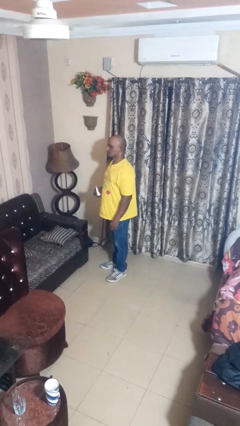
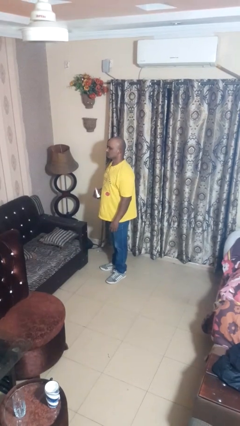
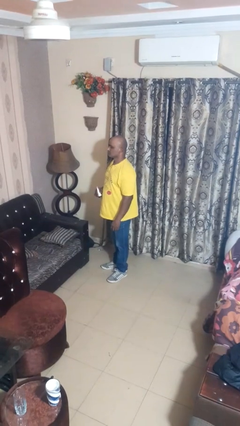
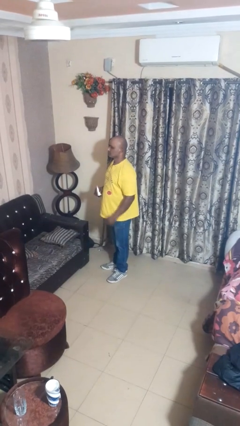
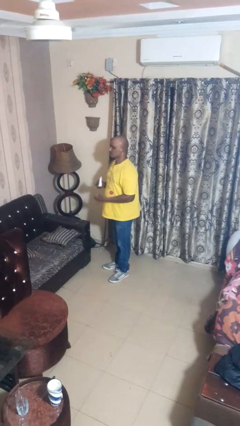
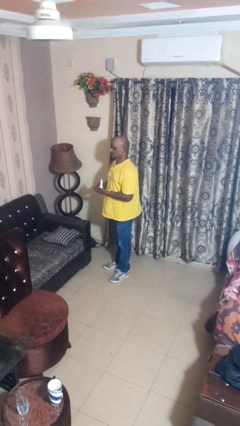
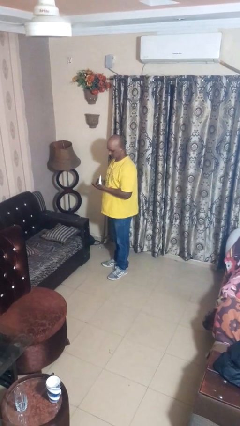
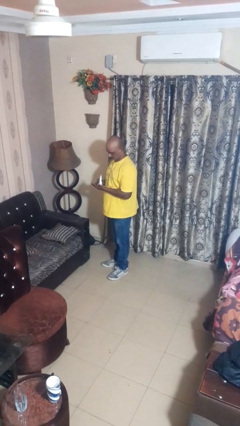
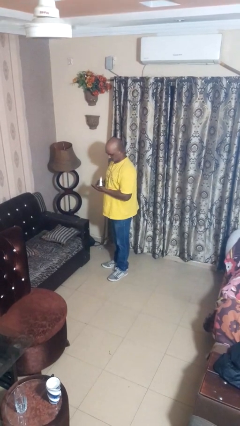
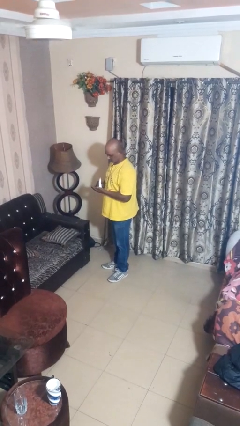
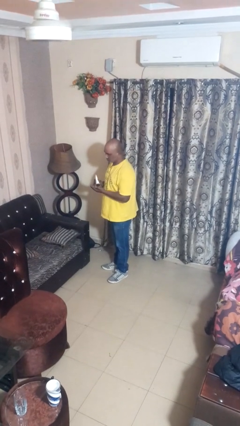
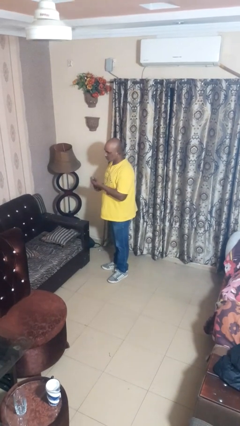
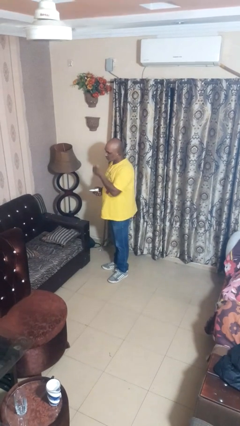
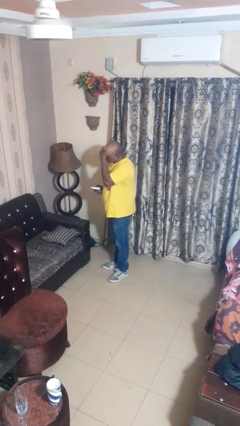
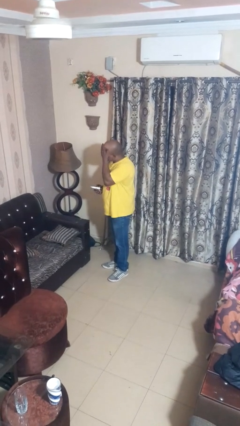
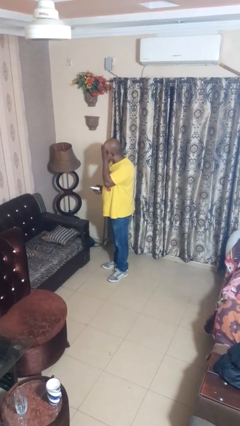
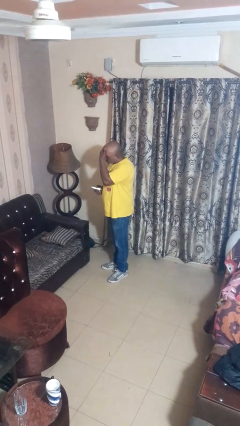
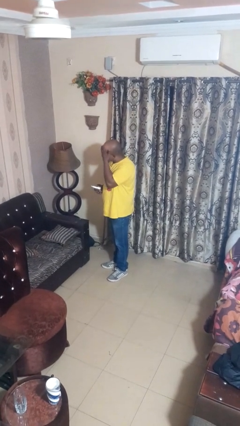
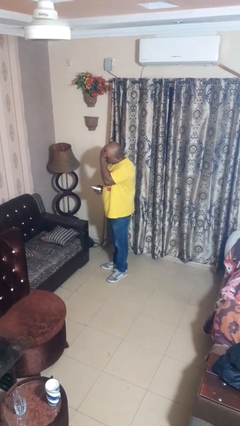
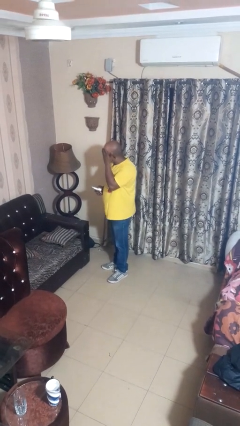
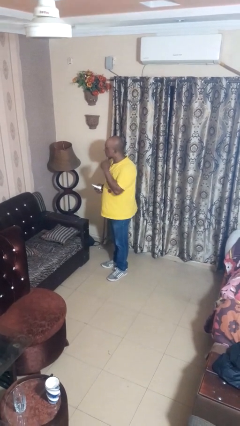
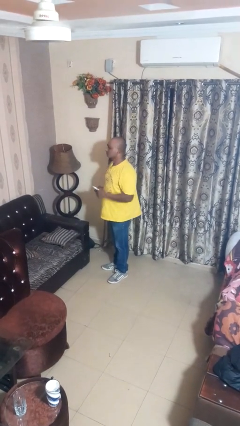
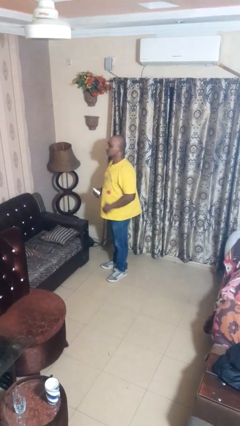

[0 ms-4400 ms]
person applies facial moisturizer

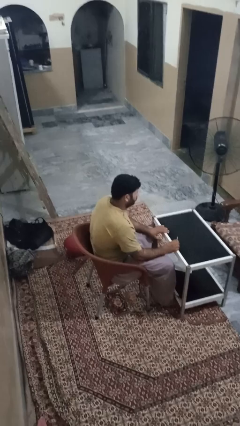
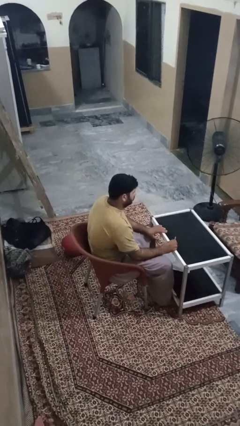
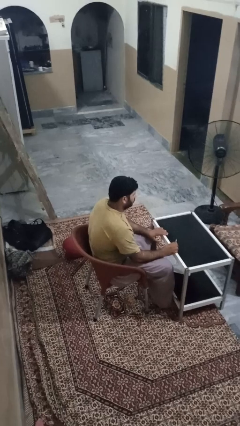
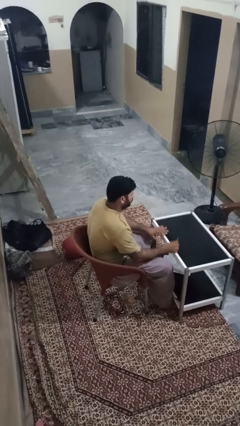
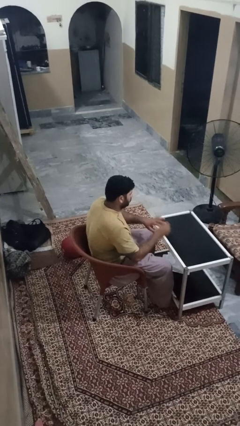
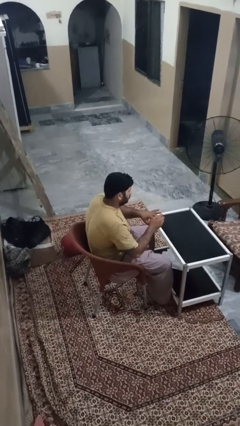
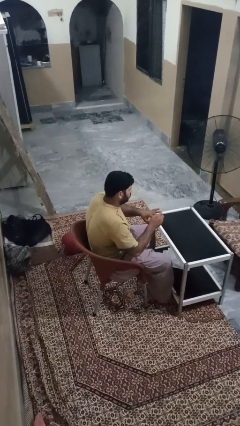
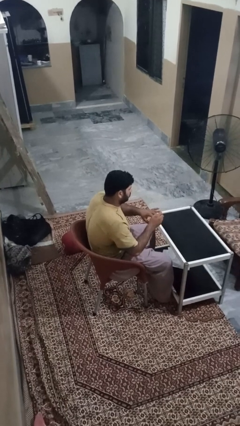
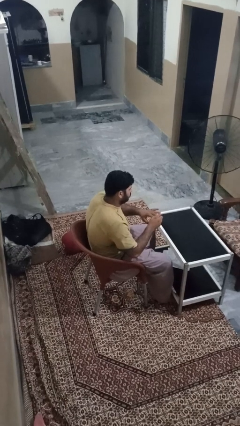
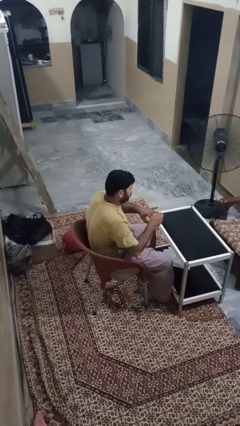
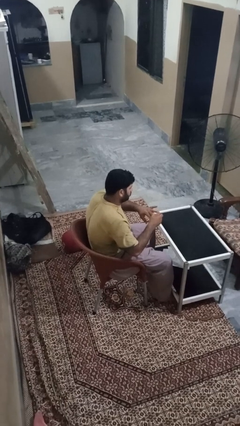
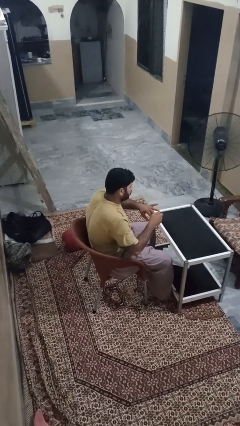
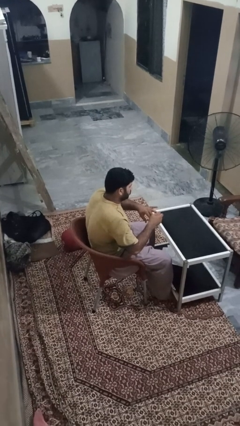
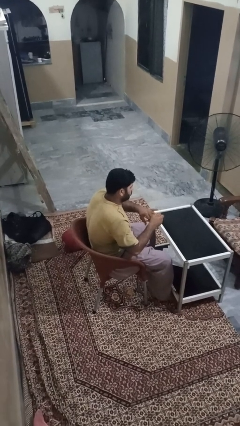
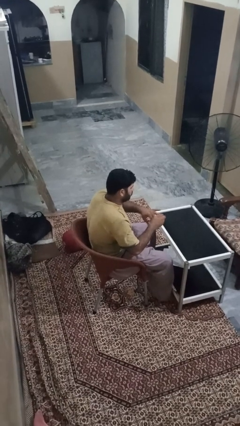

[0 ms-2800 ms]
person files fingernails

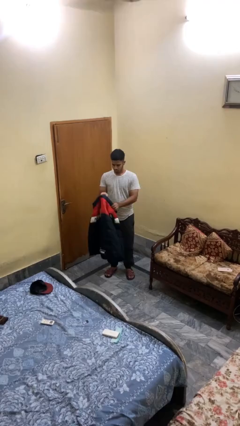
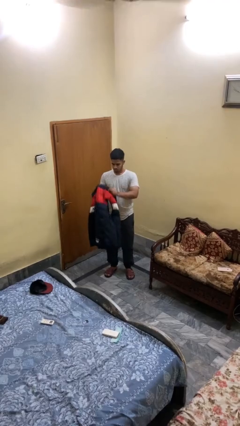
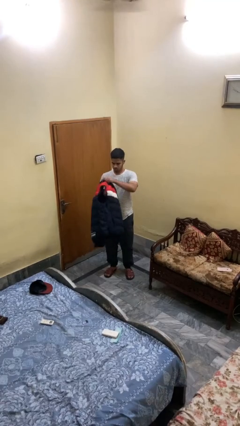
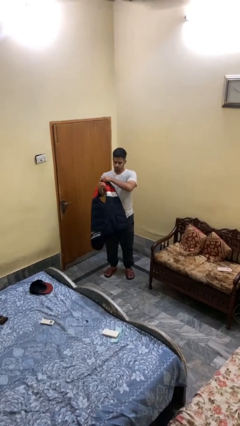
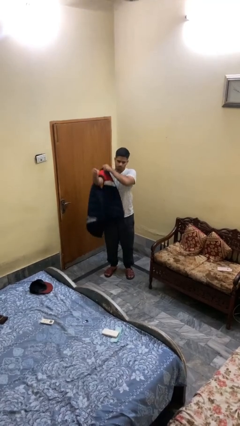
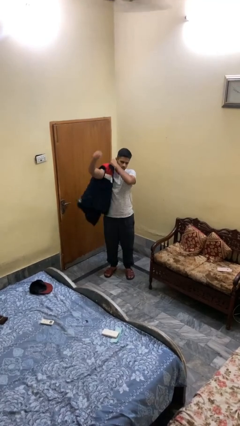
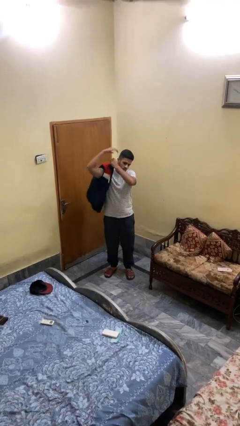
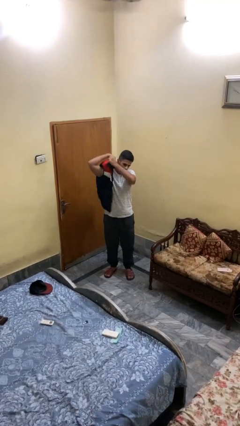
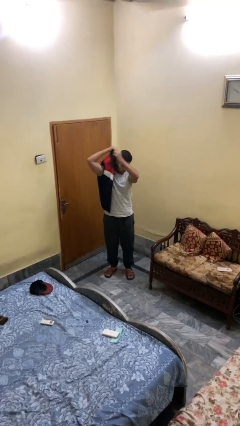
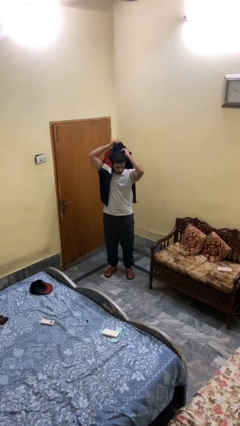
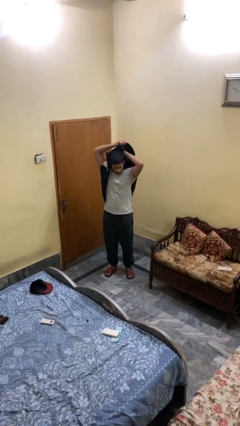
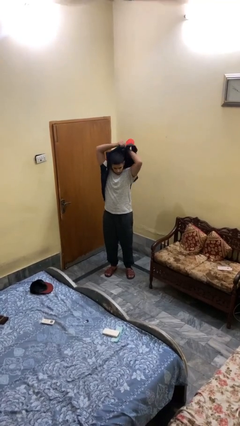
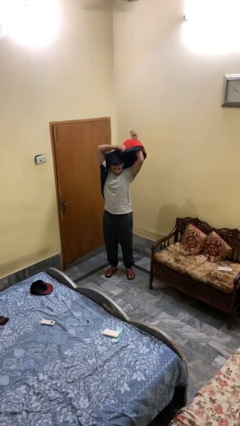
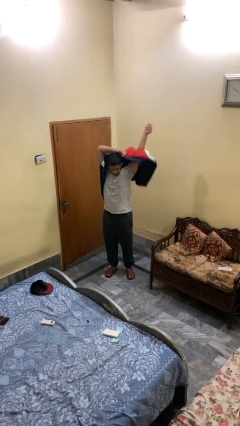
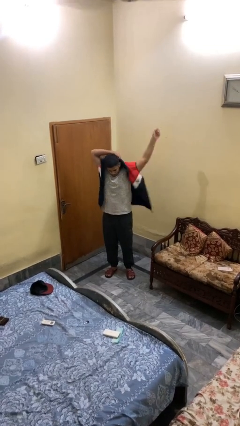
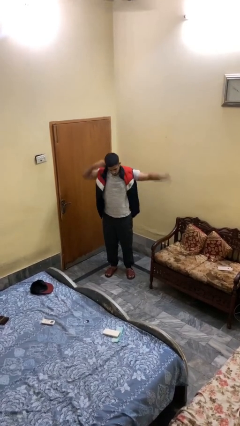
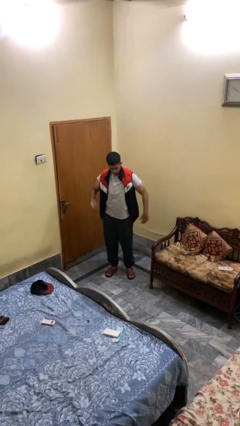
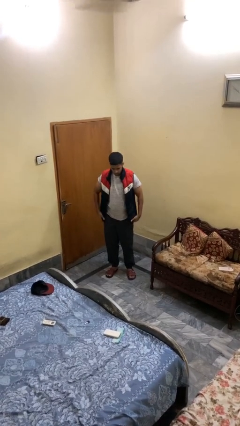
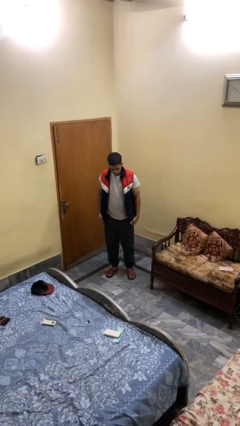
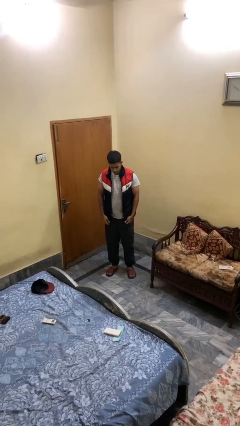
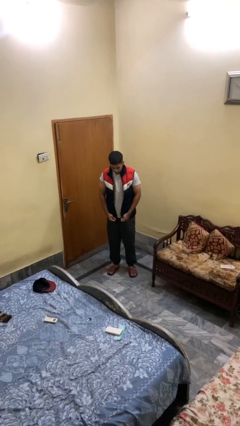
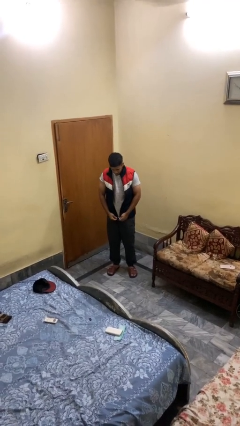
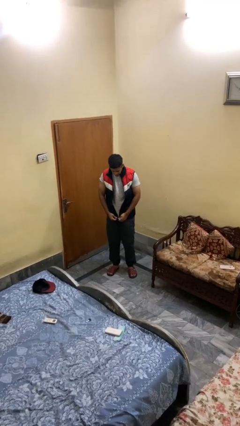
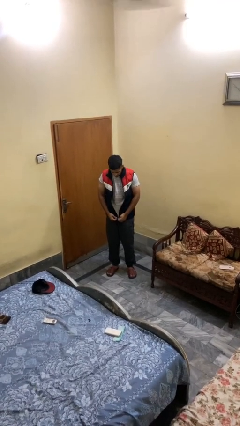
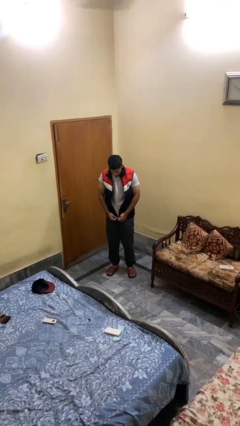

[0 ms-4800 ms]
person puts on jacket

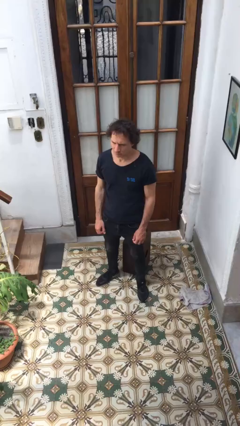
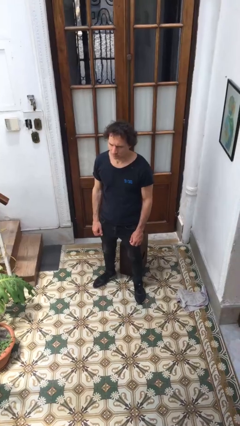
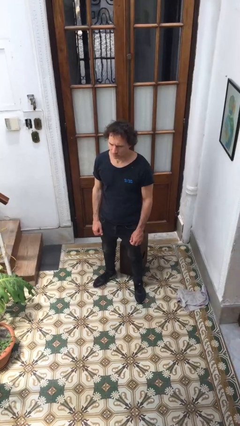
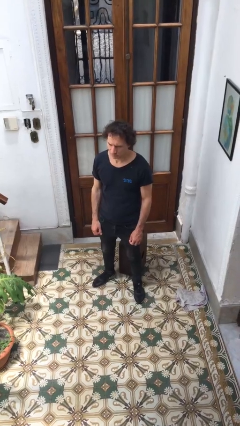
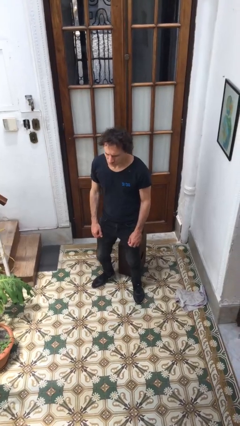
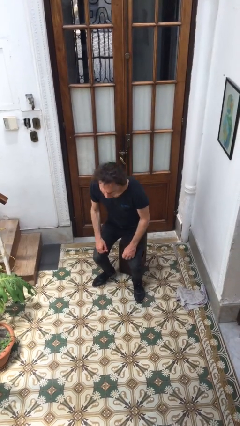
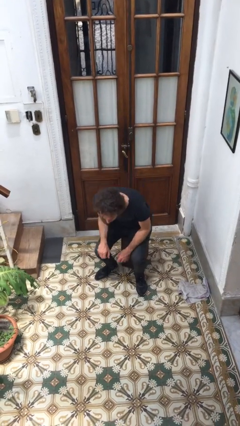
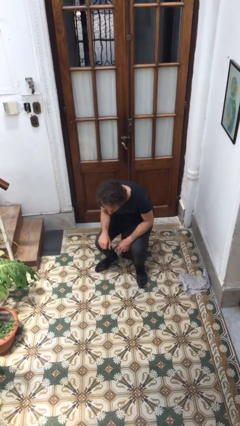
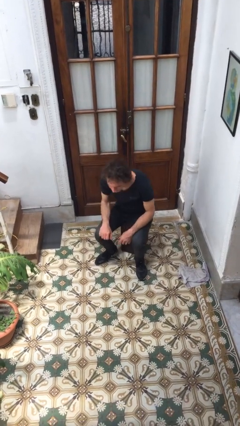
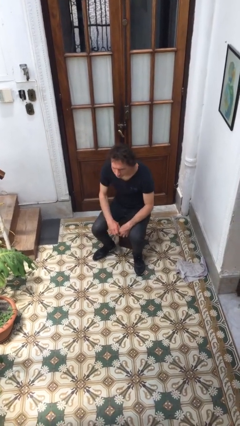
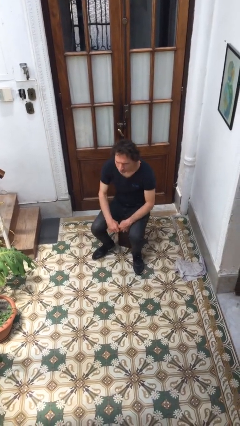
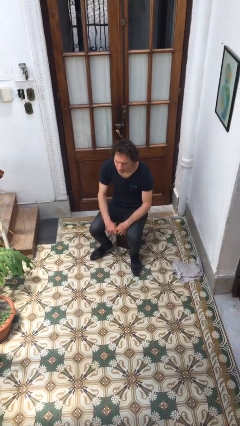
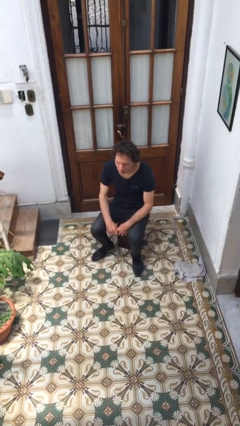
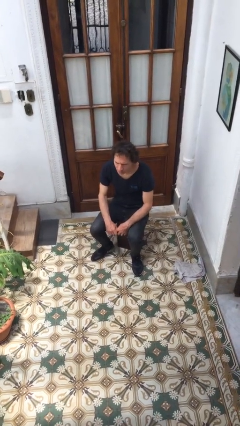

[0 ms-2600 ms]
person sits down

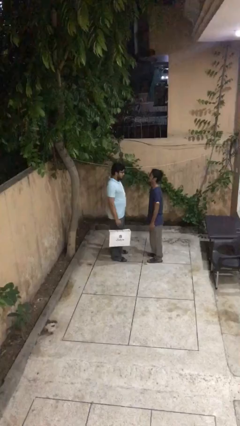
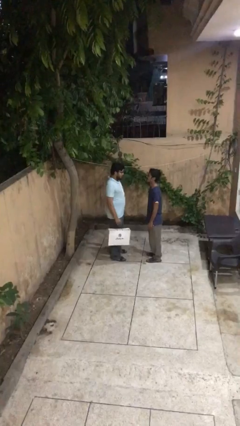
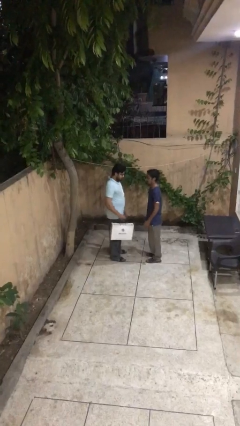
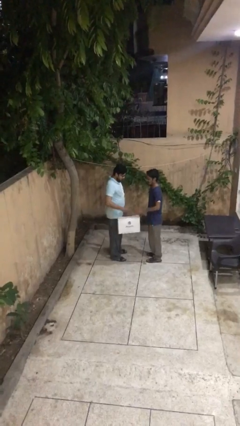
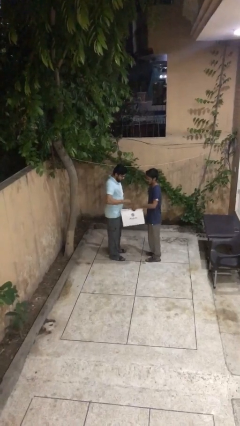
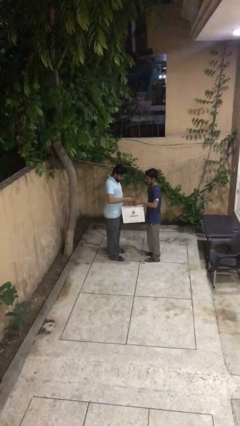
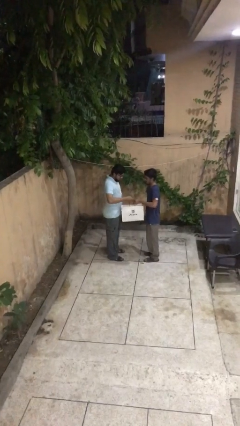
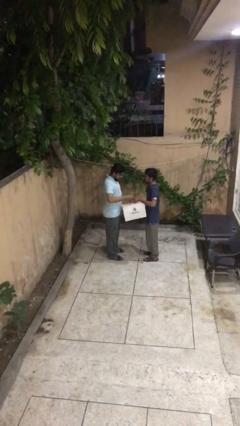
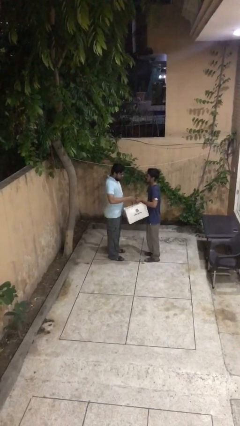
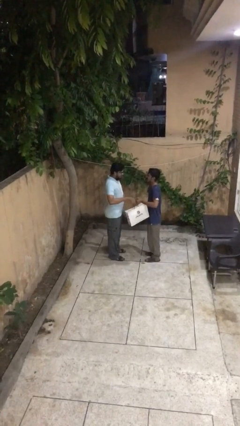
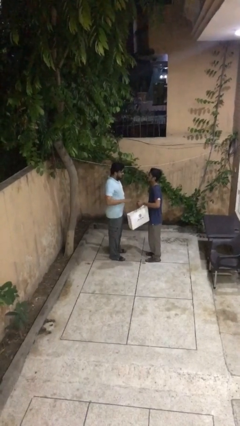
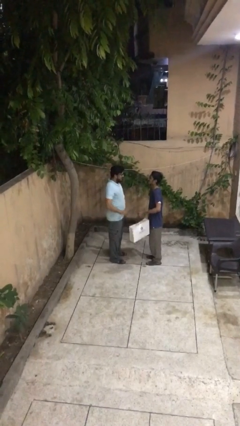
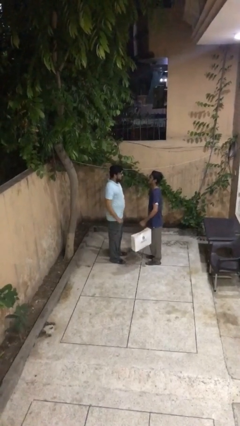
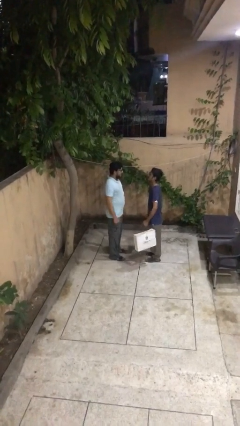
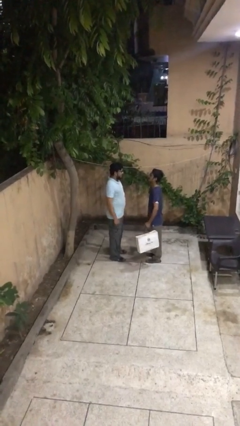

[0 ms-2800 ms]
person transfers object to person

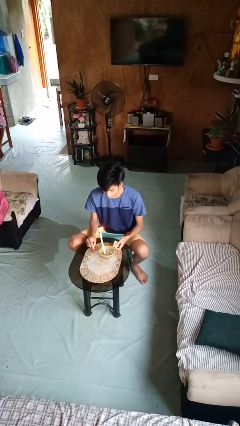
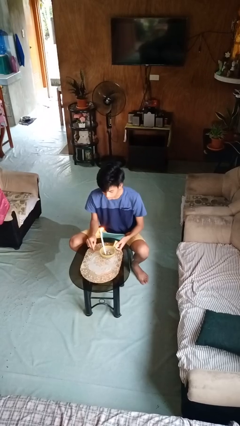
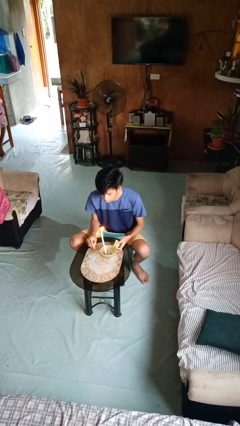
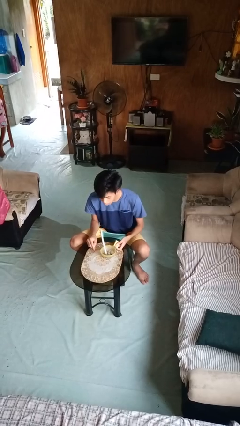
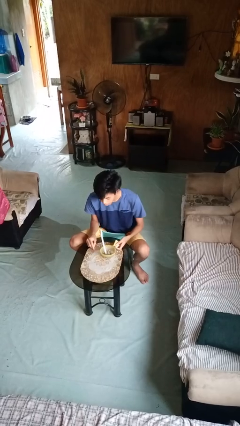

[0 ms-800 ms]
person extinguishes candle
